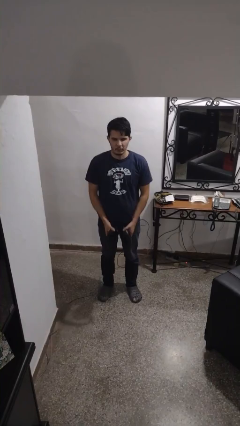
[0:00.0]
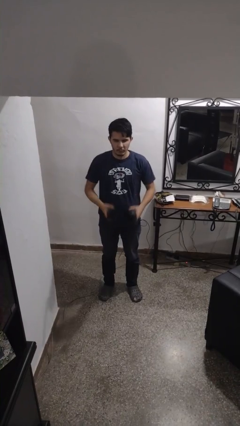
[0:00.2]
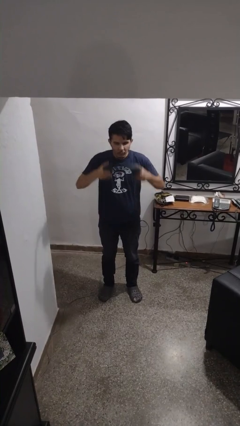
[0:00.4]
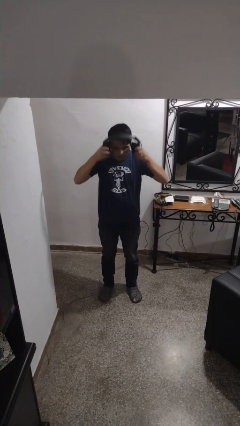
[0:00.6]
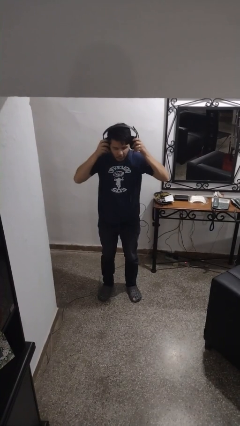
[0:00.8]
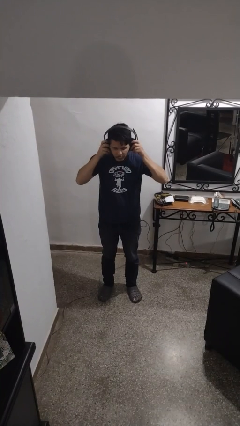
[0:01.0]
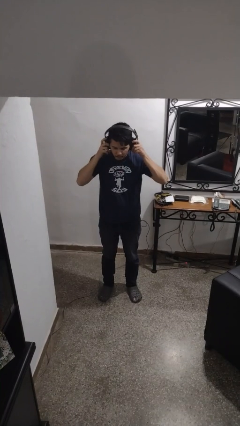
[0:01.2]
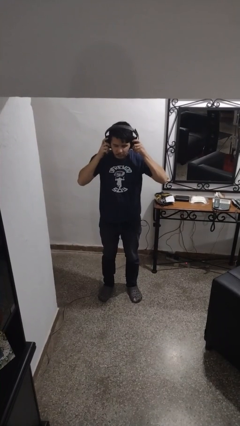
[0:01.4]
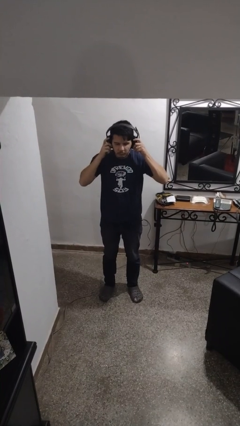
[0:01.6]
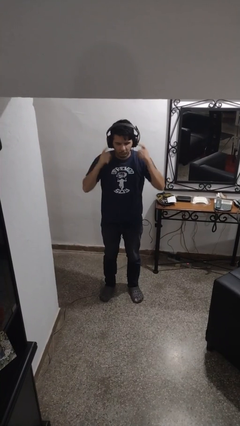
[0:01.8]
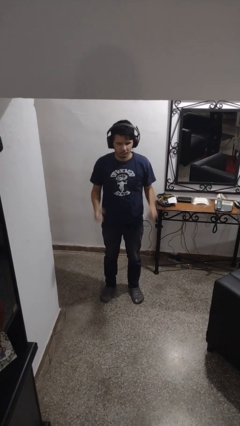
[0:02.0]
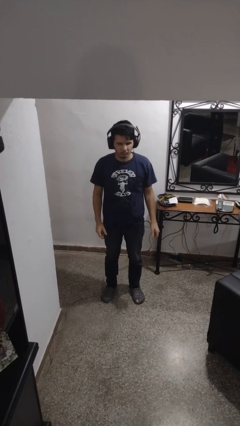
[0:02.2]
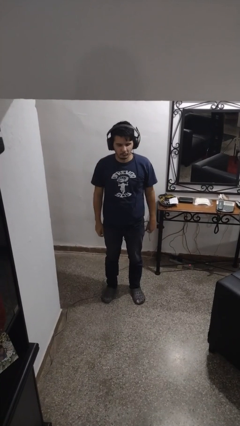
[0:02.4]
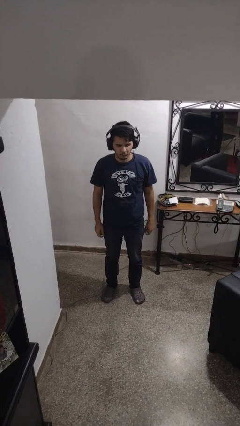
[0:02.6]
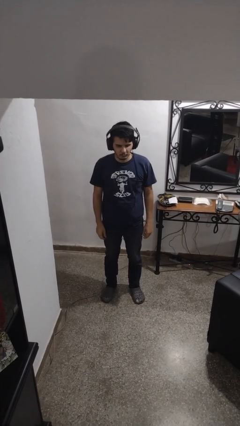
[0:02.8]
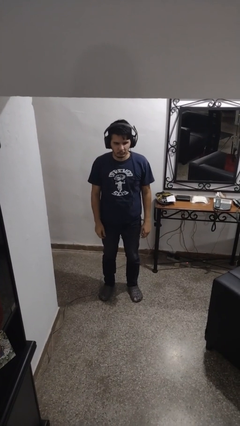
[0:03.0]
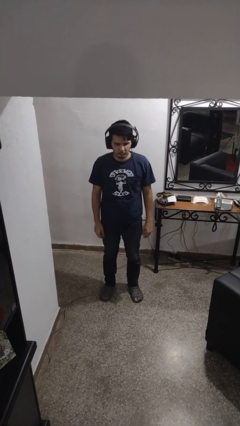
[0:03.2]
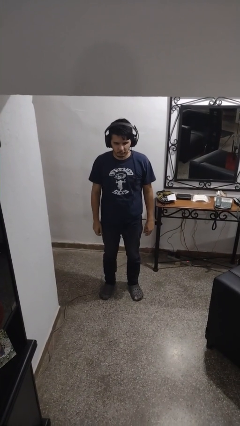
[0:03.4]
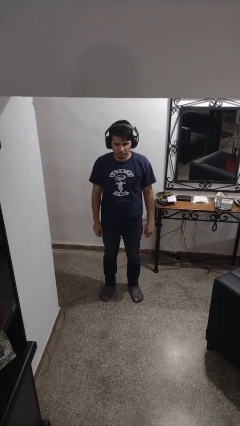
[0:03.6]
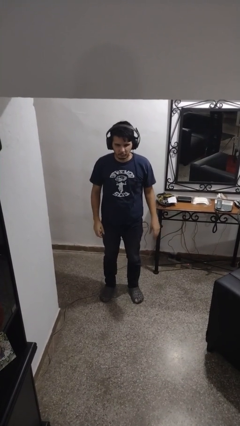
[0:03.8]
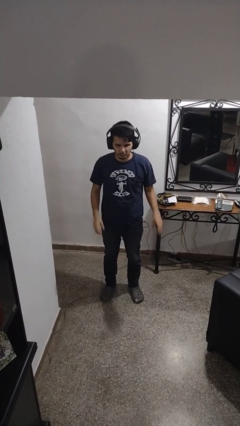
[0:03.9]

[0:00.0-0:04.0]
person puts on headphones

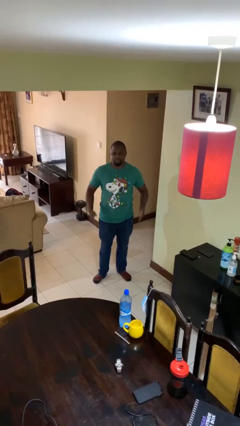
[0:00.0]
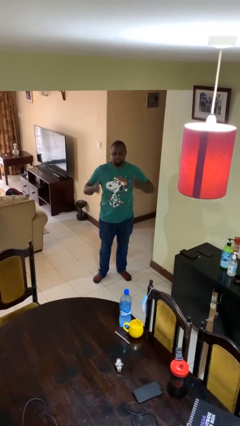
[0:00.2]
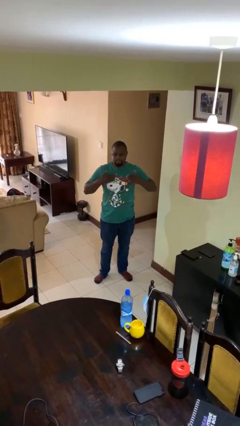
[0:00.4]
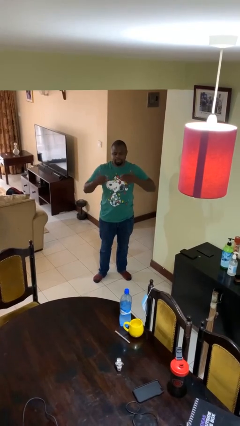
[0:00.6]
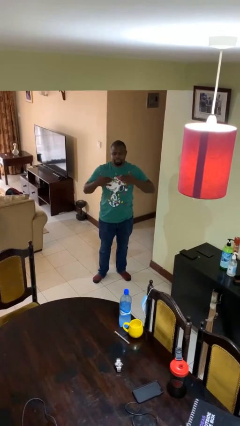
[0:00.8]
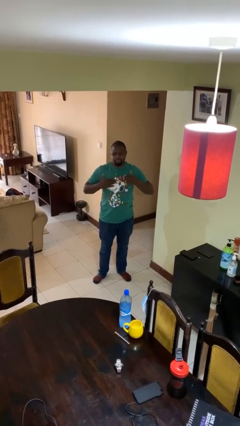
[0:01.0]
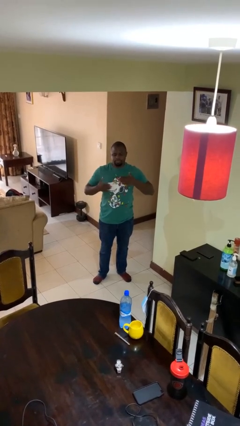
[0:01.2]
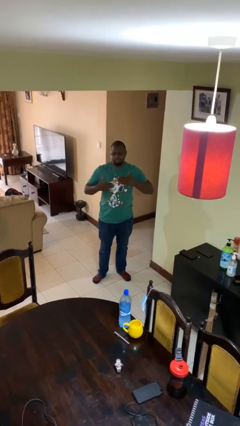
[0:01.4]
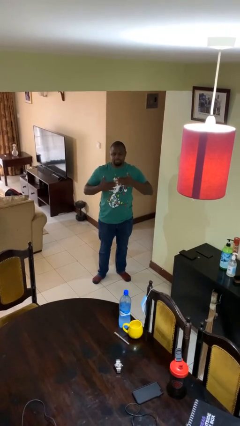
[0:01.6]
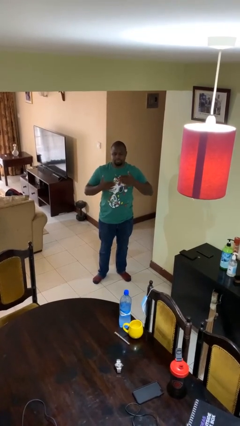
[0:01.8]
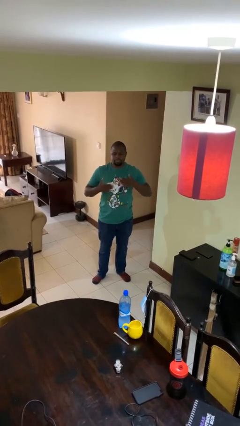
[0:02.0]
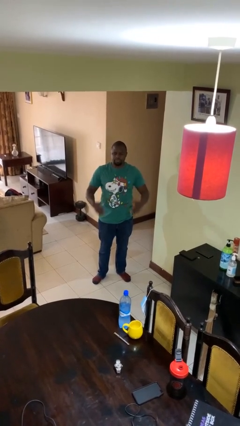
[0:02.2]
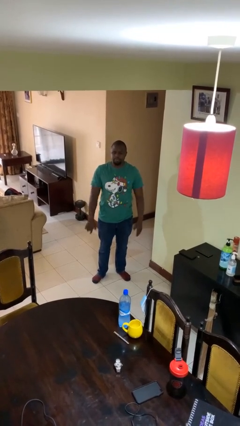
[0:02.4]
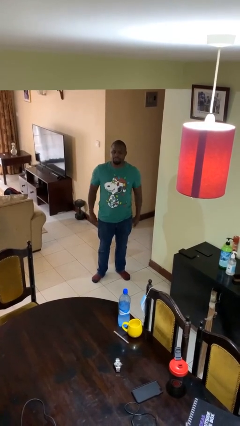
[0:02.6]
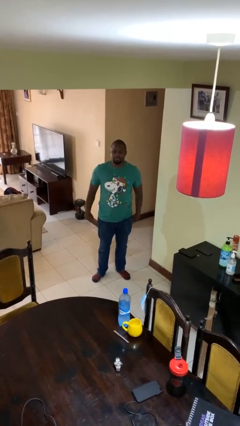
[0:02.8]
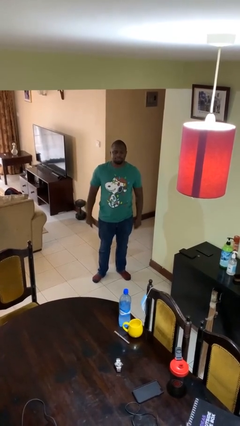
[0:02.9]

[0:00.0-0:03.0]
person drums on chest

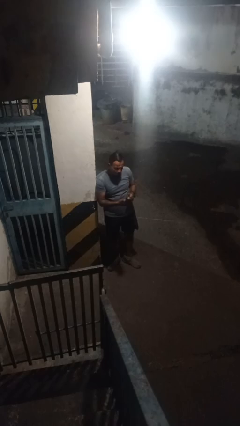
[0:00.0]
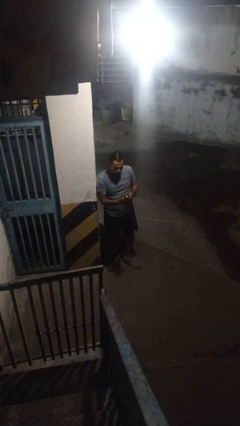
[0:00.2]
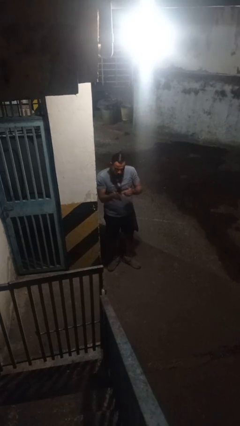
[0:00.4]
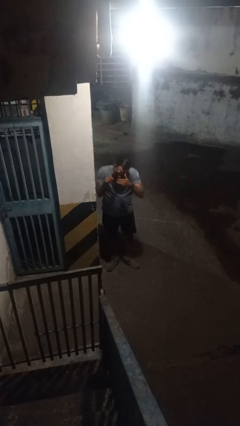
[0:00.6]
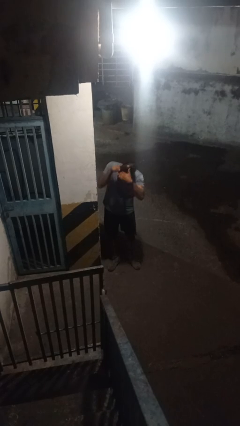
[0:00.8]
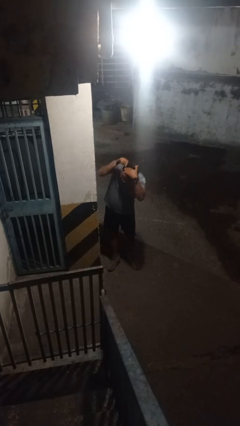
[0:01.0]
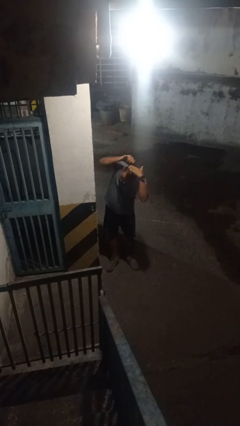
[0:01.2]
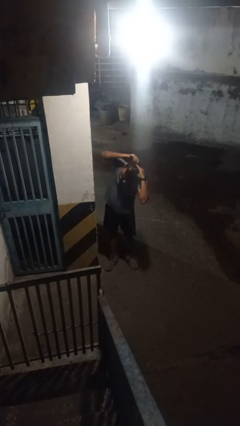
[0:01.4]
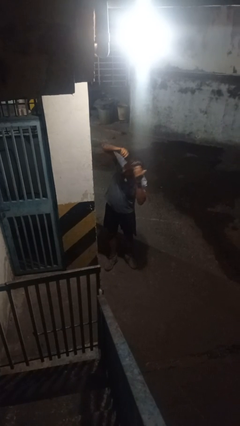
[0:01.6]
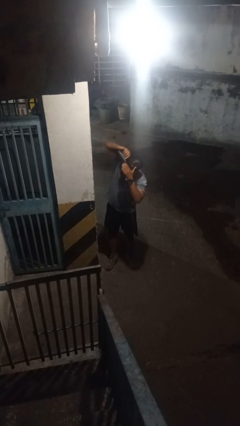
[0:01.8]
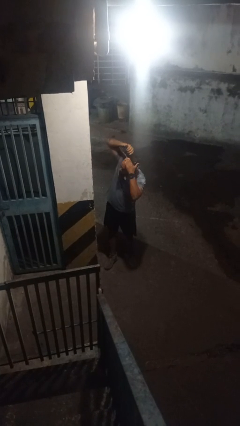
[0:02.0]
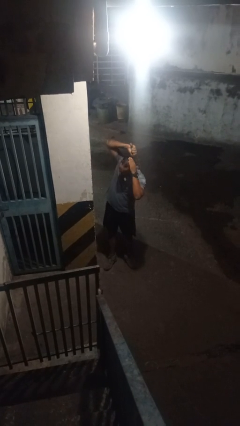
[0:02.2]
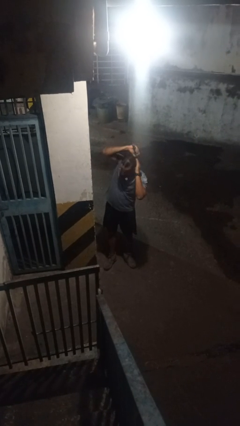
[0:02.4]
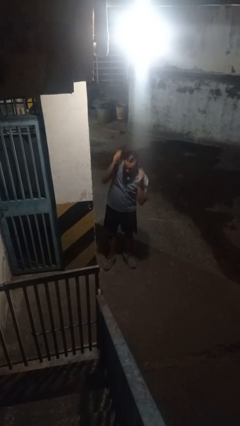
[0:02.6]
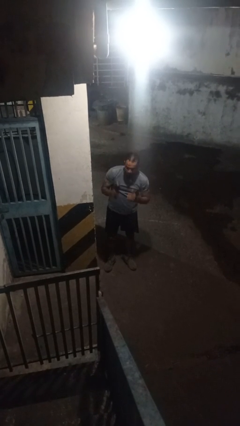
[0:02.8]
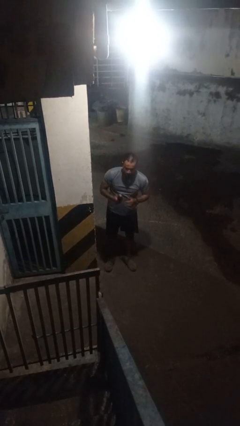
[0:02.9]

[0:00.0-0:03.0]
person brushes hair

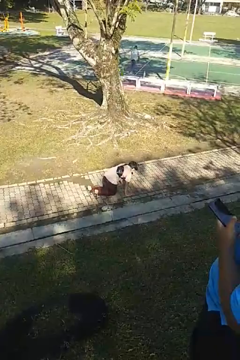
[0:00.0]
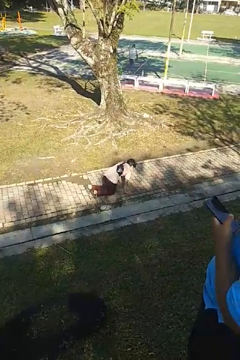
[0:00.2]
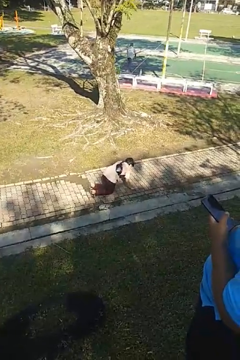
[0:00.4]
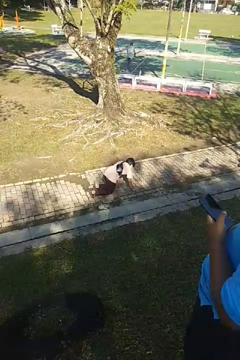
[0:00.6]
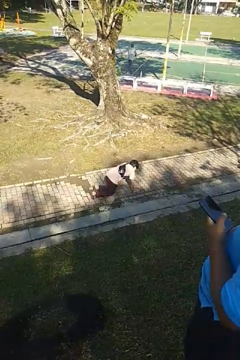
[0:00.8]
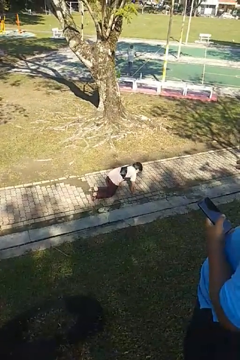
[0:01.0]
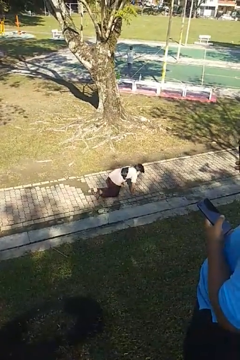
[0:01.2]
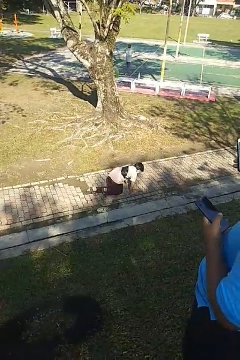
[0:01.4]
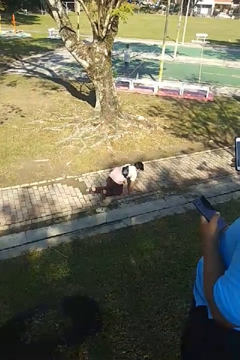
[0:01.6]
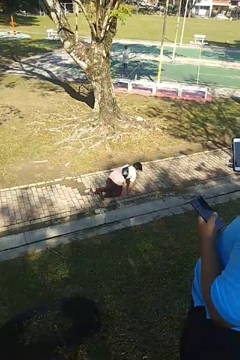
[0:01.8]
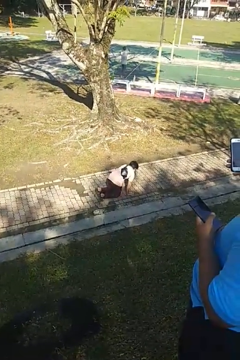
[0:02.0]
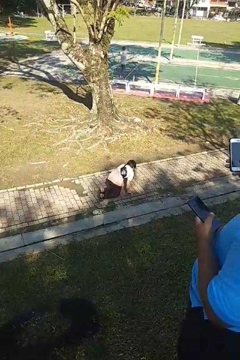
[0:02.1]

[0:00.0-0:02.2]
person crawls

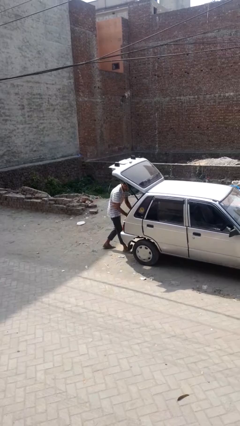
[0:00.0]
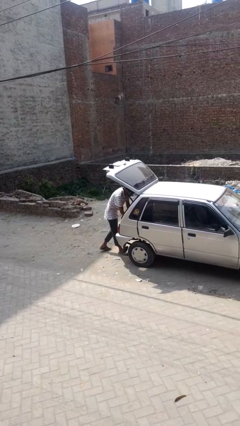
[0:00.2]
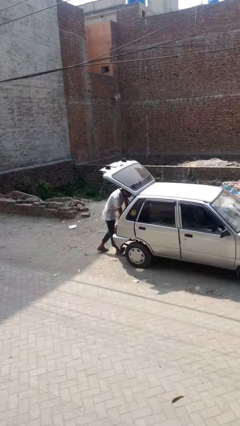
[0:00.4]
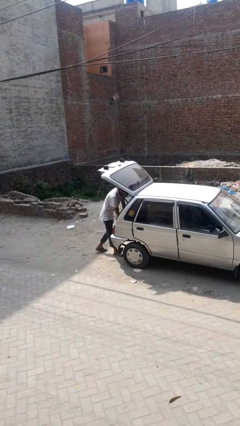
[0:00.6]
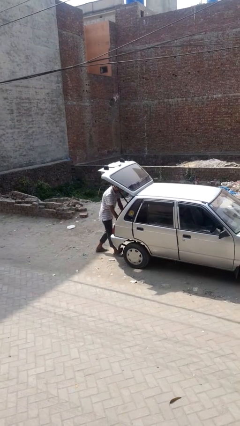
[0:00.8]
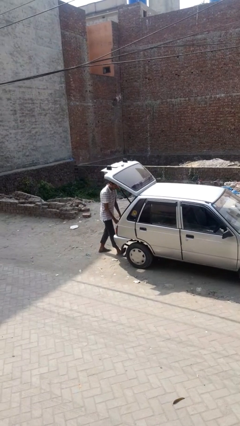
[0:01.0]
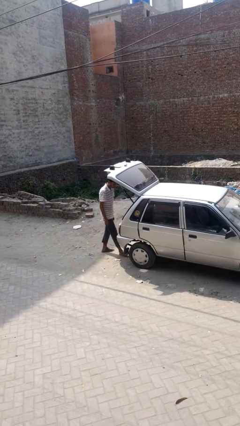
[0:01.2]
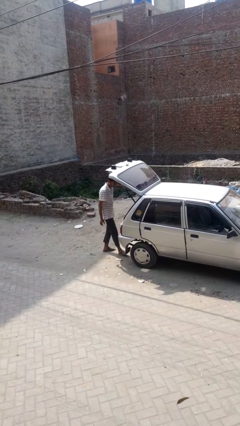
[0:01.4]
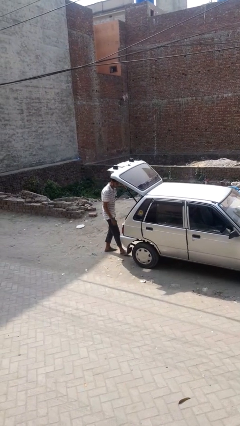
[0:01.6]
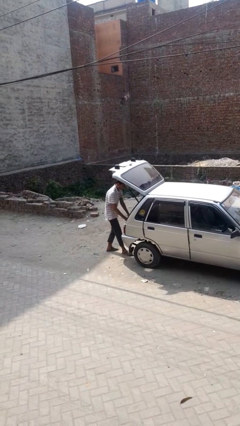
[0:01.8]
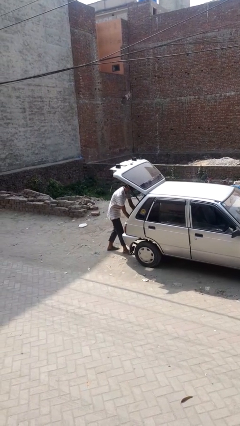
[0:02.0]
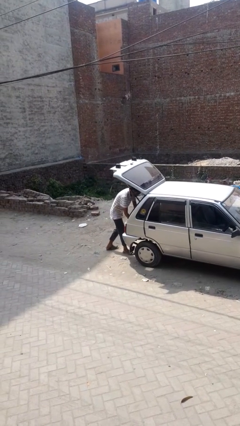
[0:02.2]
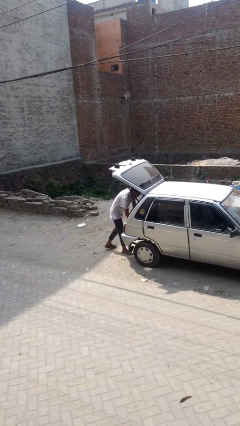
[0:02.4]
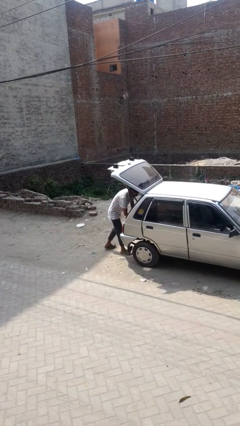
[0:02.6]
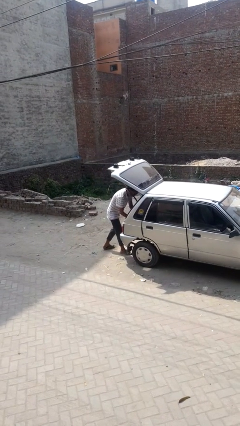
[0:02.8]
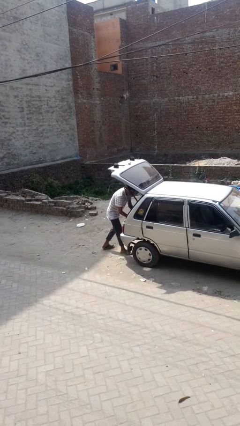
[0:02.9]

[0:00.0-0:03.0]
person loads car

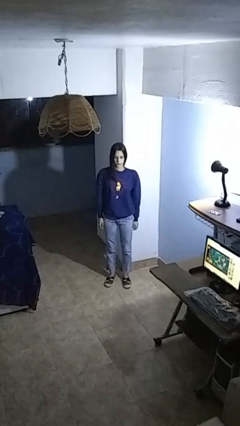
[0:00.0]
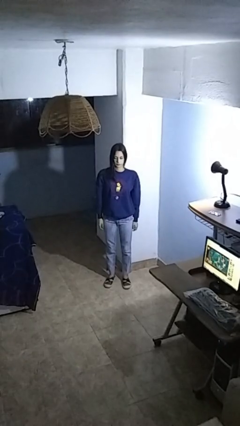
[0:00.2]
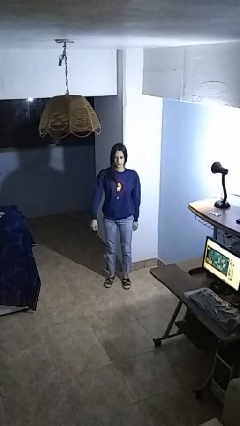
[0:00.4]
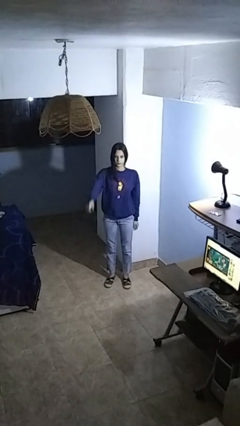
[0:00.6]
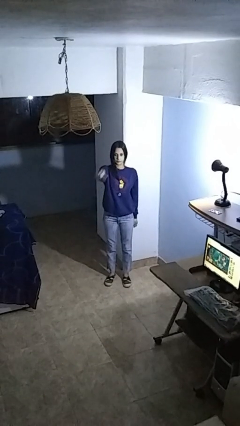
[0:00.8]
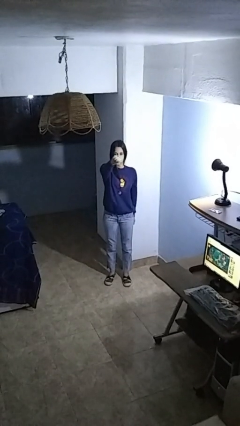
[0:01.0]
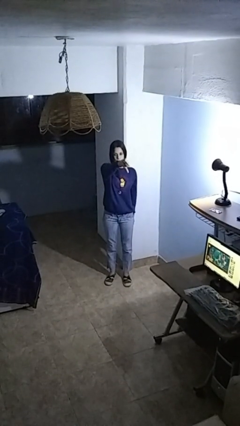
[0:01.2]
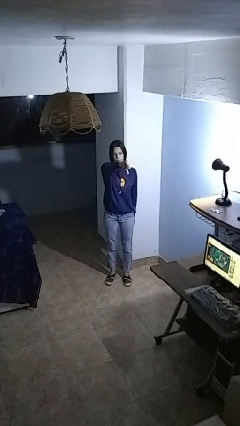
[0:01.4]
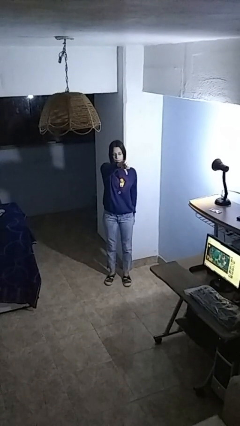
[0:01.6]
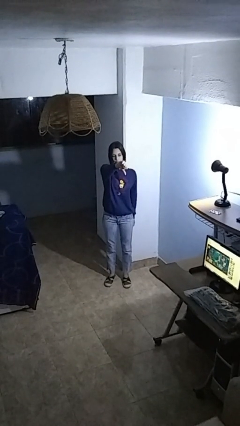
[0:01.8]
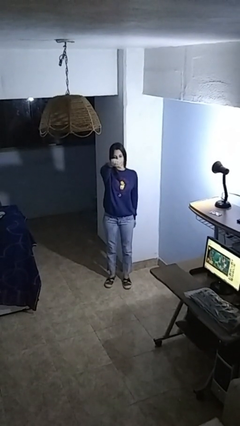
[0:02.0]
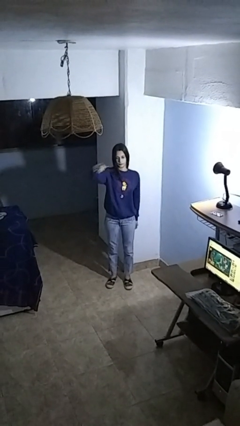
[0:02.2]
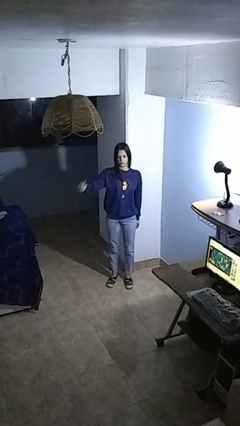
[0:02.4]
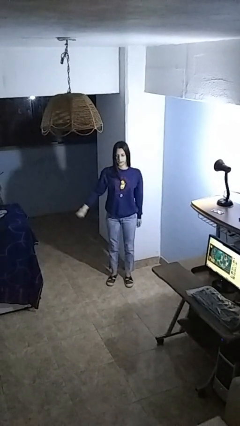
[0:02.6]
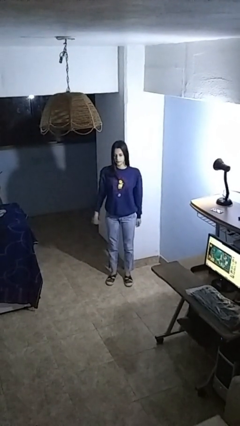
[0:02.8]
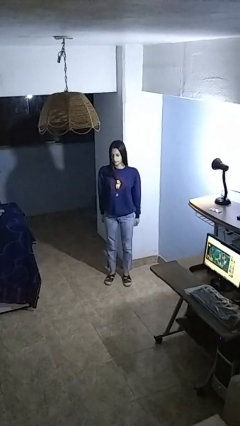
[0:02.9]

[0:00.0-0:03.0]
person gestures thumbs down
